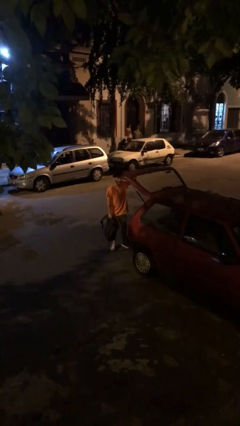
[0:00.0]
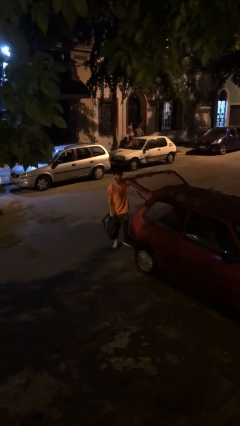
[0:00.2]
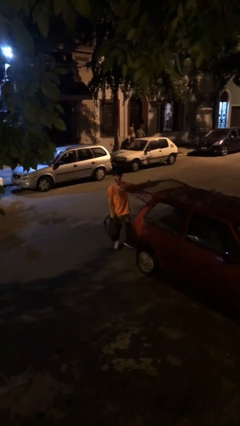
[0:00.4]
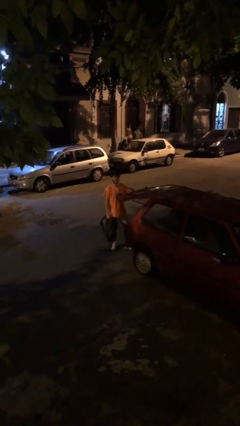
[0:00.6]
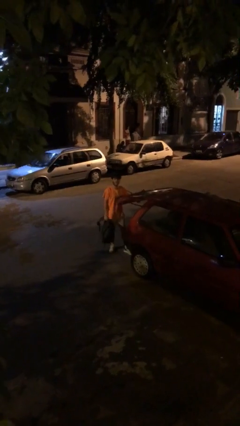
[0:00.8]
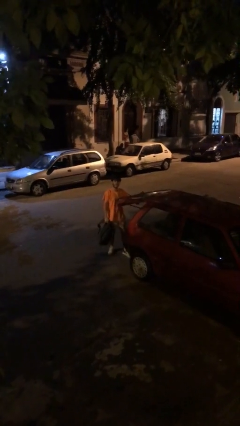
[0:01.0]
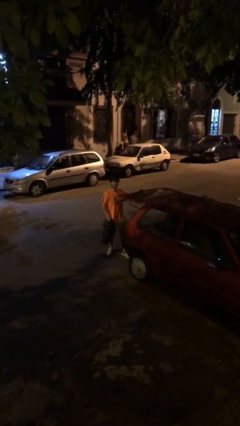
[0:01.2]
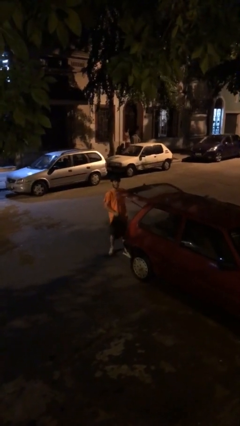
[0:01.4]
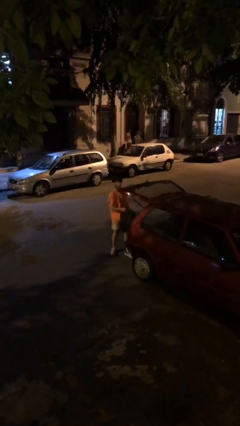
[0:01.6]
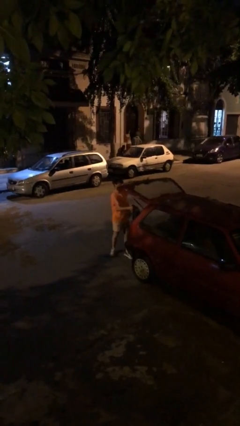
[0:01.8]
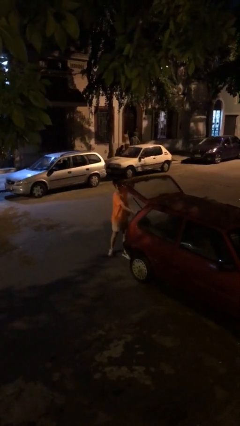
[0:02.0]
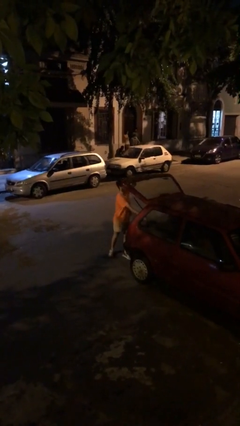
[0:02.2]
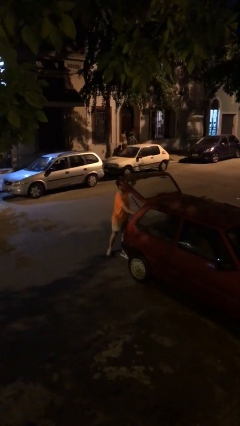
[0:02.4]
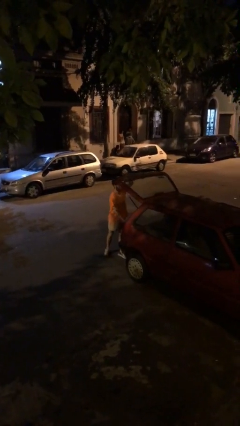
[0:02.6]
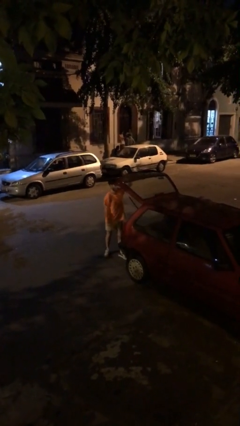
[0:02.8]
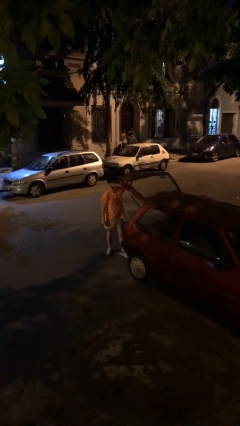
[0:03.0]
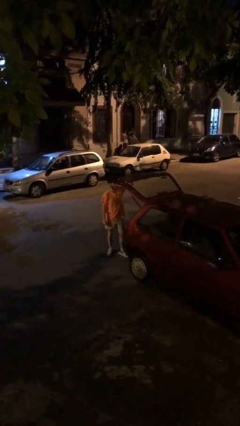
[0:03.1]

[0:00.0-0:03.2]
person loads car

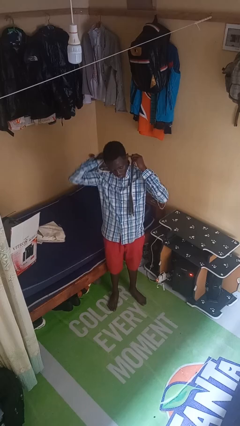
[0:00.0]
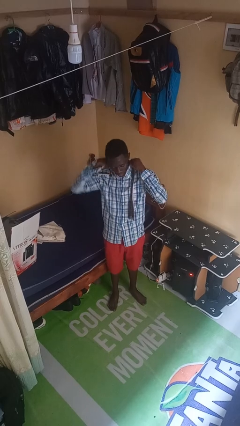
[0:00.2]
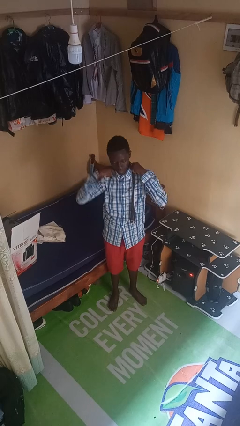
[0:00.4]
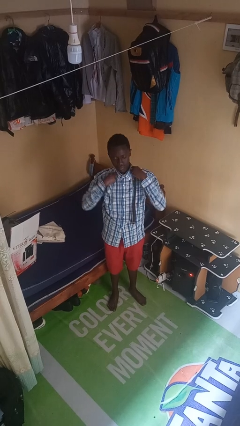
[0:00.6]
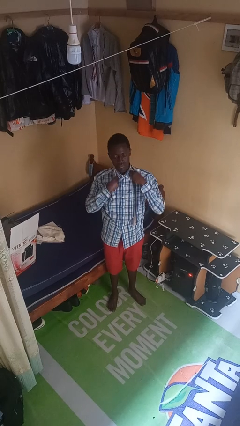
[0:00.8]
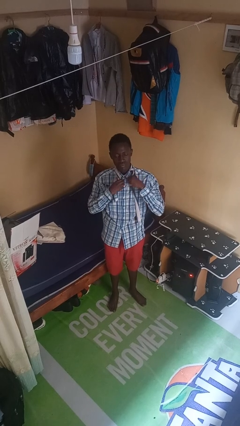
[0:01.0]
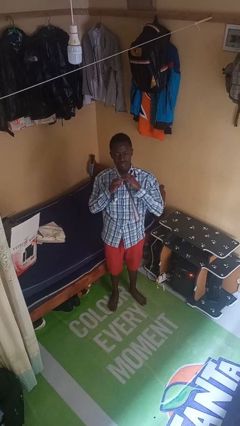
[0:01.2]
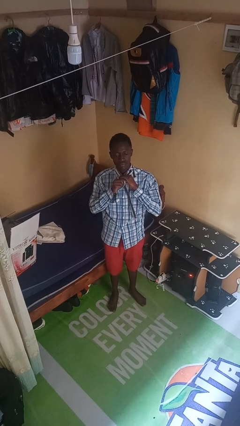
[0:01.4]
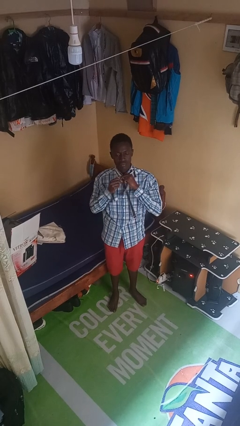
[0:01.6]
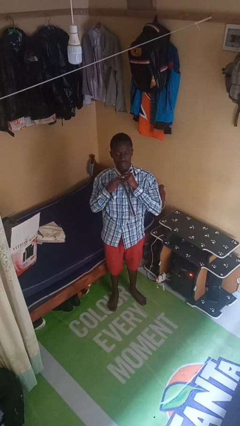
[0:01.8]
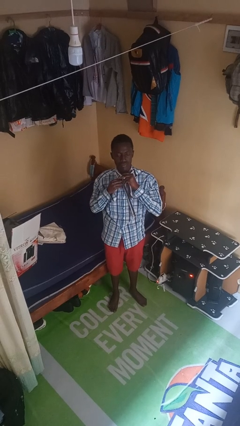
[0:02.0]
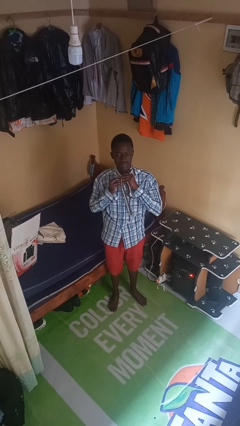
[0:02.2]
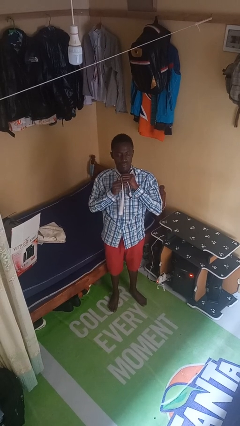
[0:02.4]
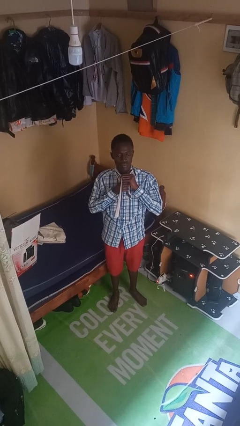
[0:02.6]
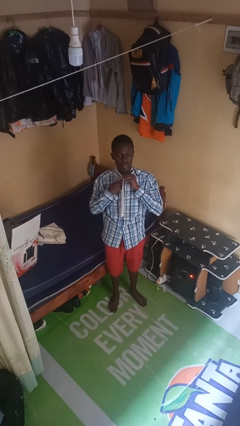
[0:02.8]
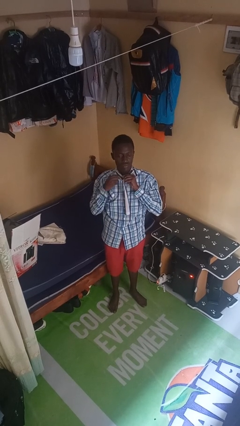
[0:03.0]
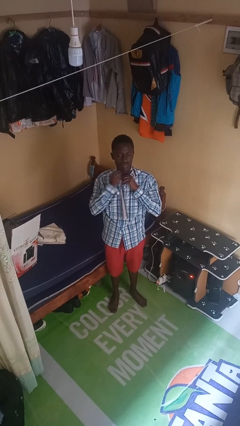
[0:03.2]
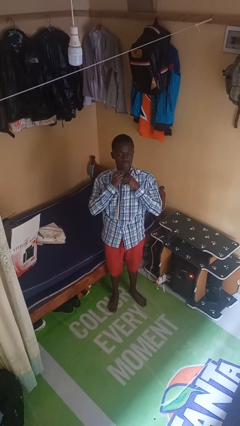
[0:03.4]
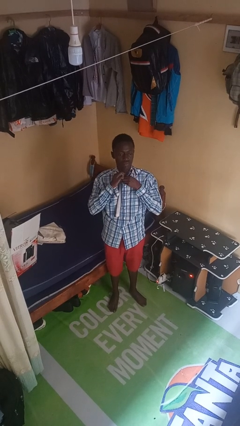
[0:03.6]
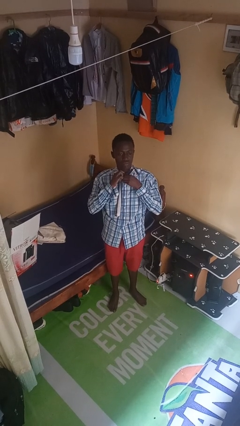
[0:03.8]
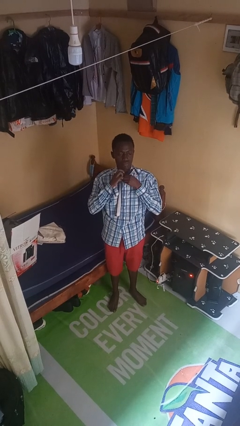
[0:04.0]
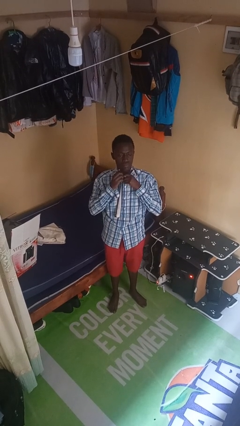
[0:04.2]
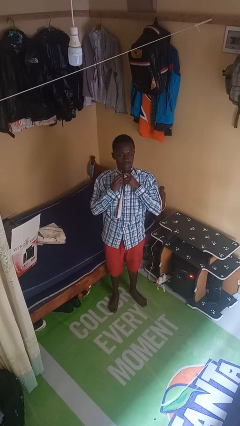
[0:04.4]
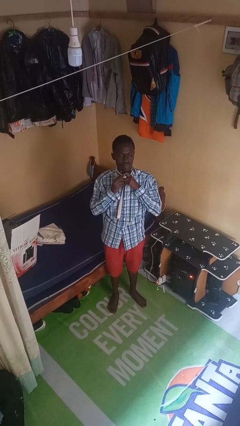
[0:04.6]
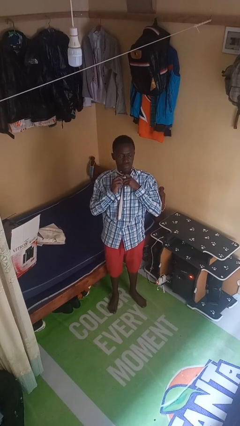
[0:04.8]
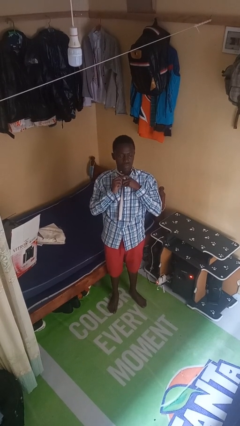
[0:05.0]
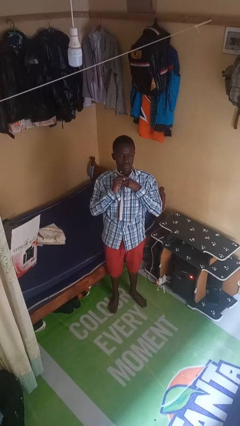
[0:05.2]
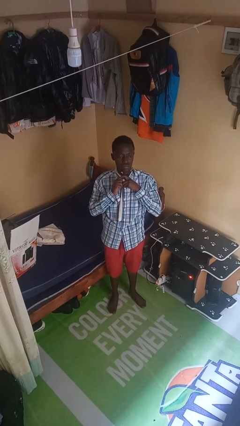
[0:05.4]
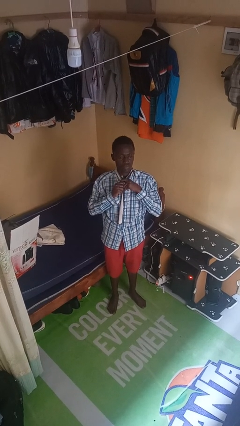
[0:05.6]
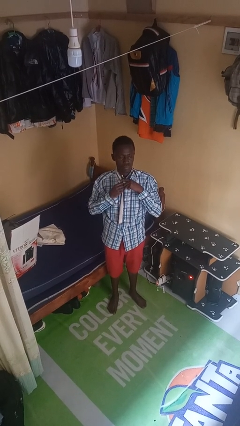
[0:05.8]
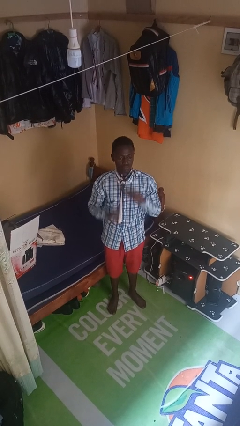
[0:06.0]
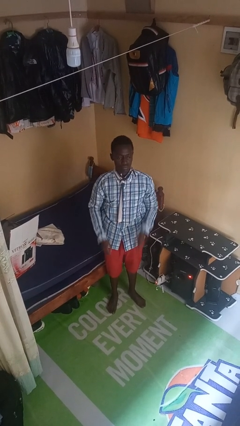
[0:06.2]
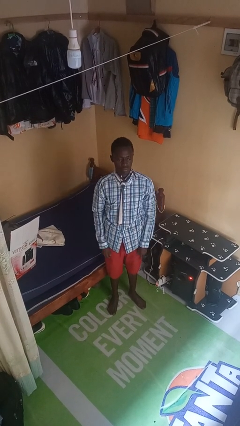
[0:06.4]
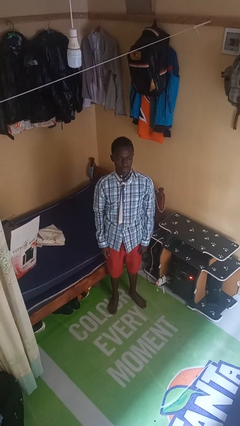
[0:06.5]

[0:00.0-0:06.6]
person puts on necktie

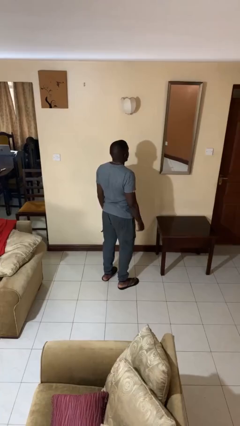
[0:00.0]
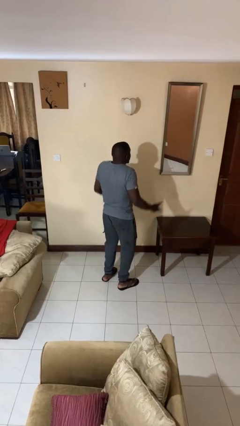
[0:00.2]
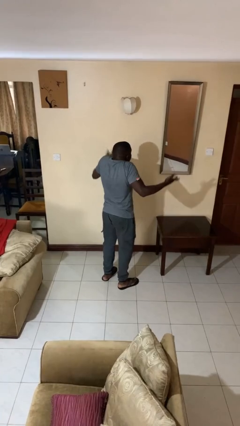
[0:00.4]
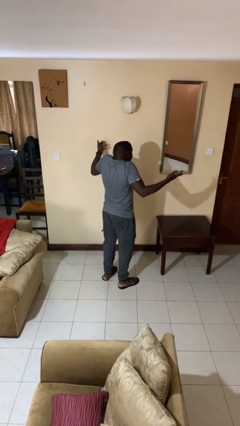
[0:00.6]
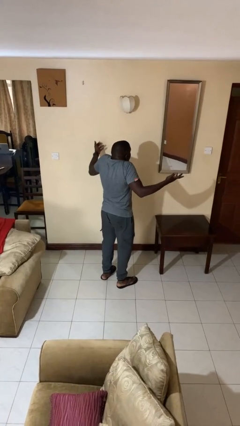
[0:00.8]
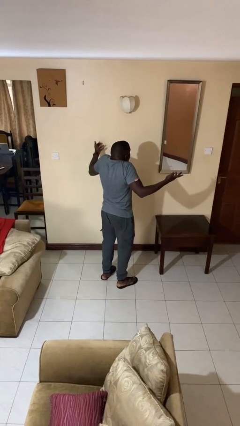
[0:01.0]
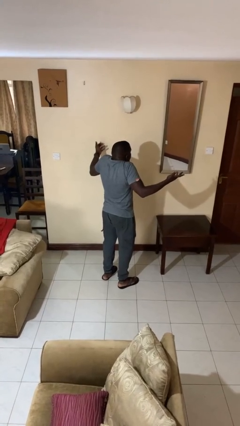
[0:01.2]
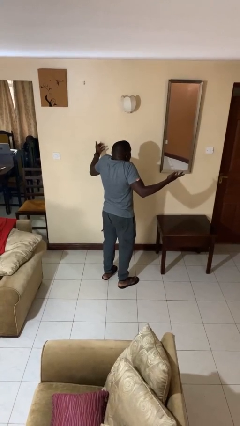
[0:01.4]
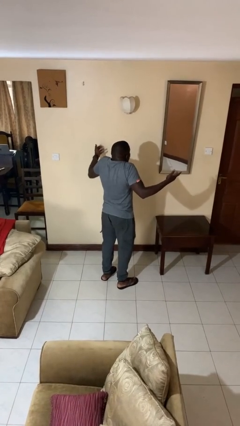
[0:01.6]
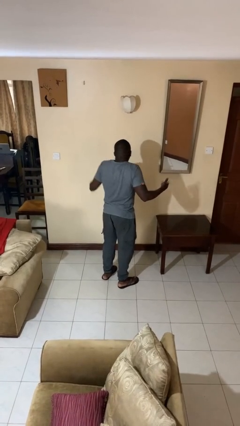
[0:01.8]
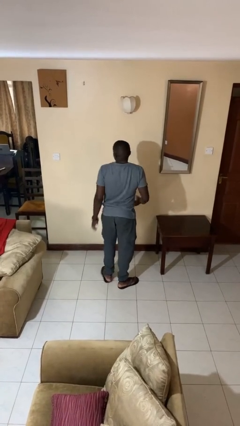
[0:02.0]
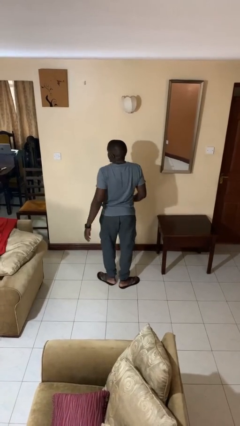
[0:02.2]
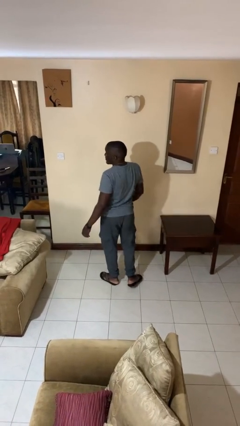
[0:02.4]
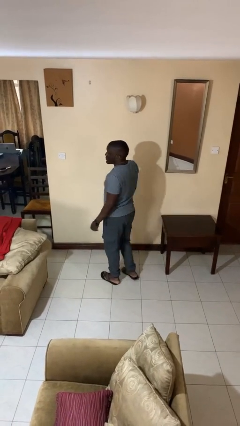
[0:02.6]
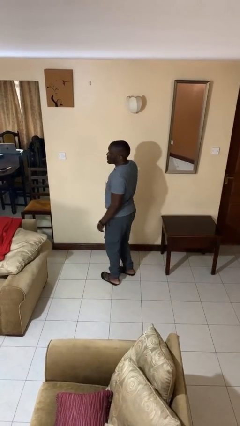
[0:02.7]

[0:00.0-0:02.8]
person shrugs

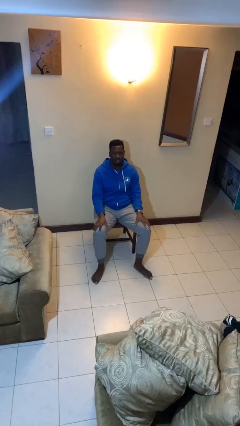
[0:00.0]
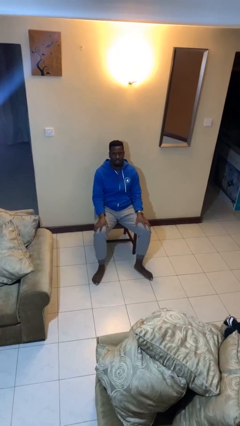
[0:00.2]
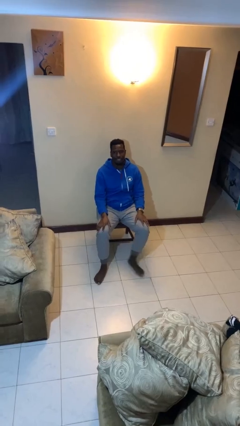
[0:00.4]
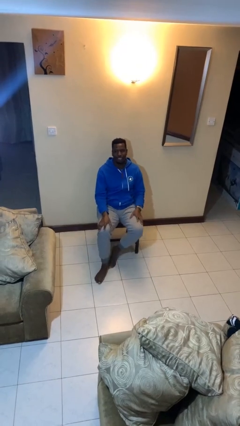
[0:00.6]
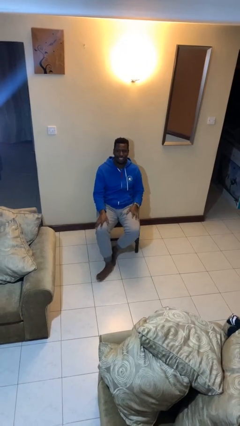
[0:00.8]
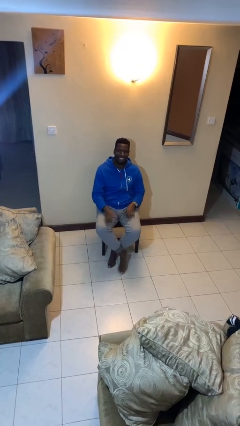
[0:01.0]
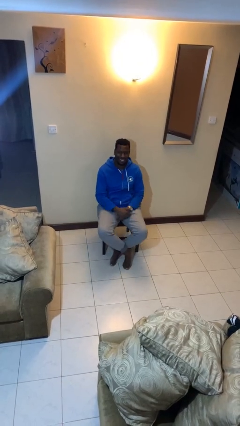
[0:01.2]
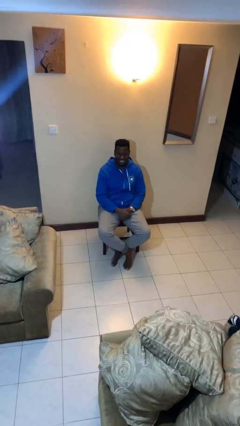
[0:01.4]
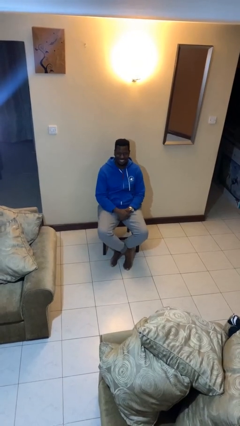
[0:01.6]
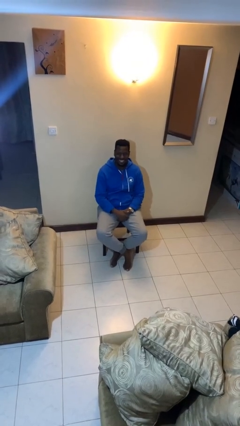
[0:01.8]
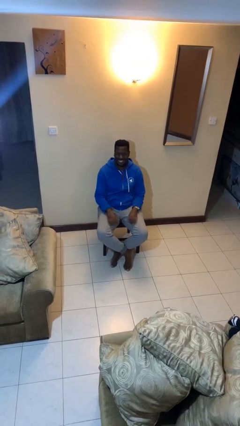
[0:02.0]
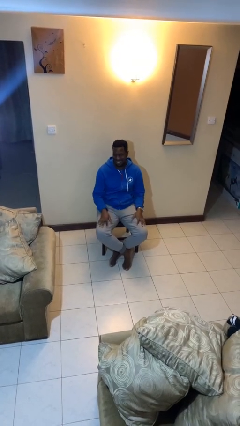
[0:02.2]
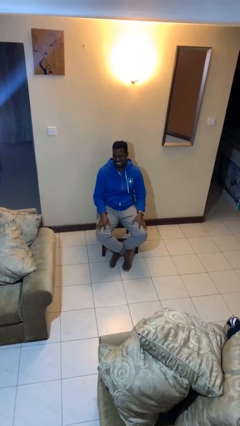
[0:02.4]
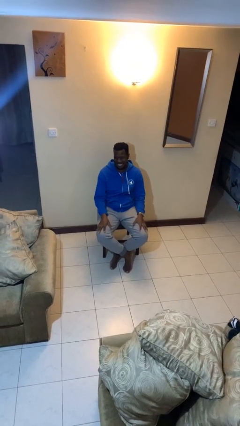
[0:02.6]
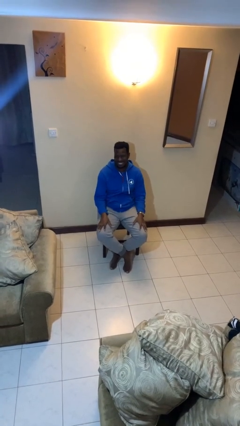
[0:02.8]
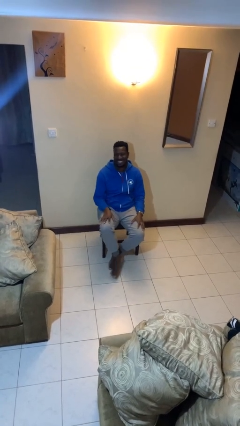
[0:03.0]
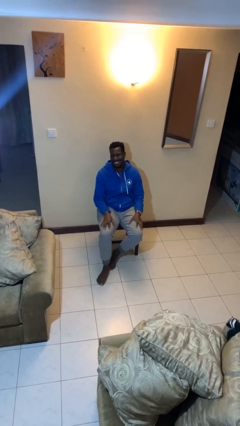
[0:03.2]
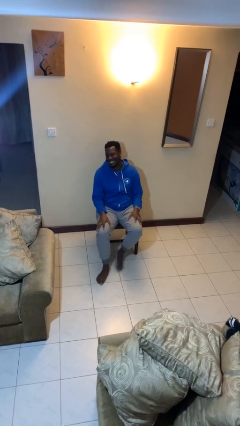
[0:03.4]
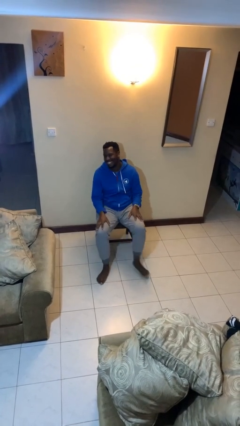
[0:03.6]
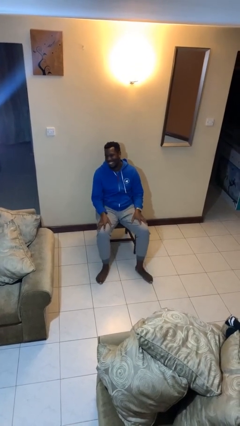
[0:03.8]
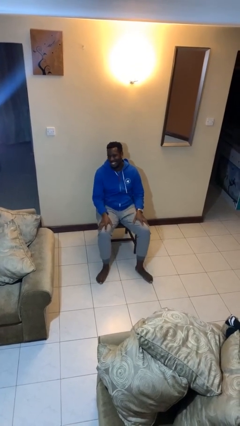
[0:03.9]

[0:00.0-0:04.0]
person crosses legs

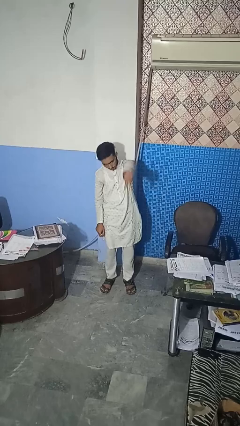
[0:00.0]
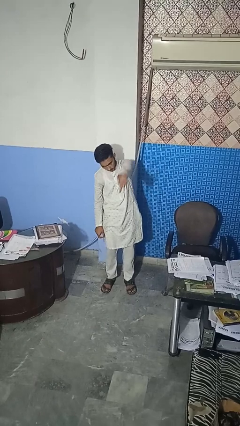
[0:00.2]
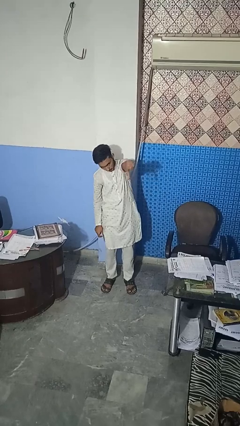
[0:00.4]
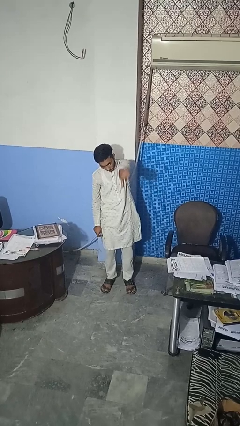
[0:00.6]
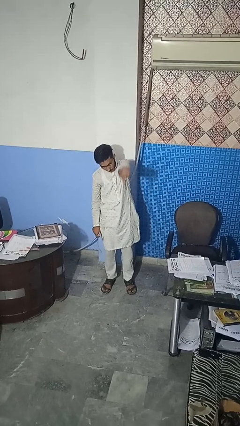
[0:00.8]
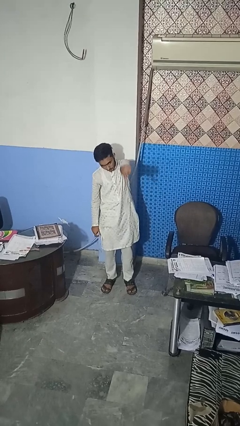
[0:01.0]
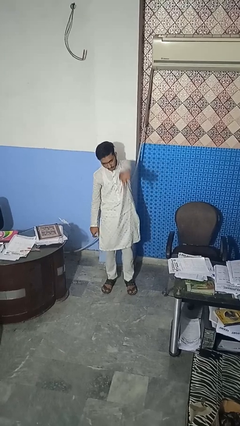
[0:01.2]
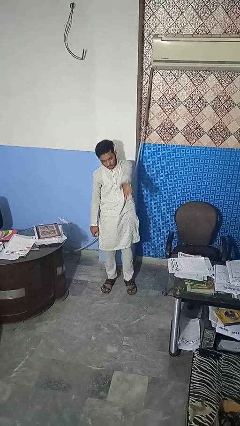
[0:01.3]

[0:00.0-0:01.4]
person gestures thumbs down
